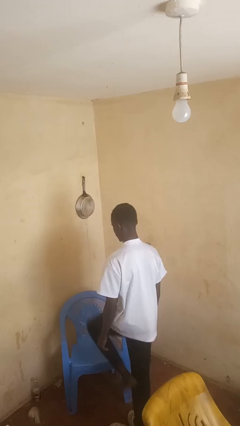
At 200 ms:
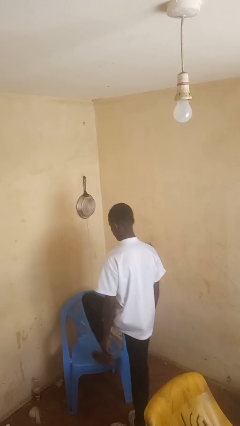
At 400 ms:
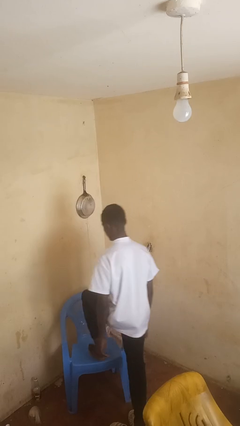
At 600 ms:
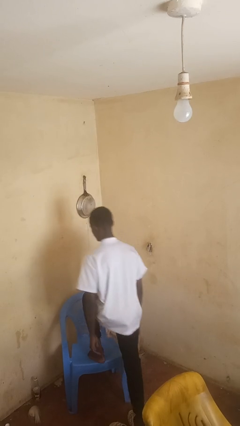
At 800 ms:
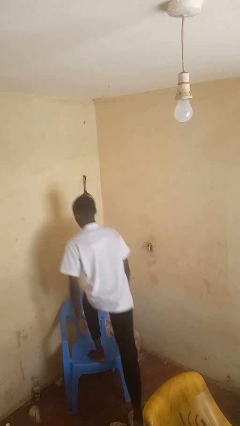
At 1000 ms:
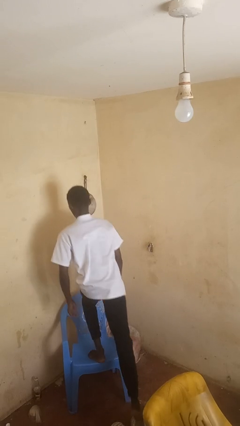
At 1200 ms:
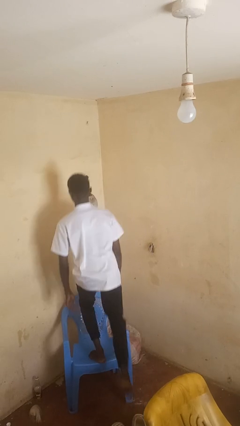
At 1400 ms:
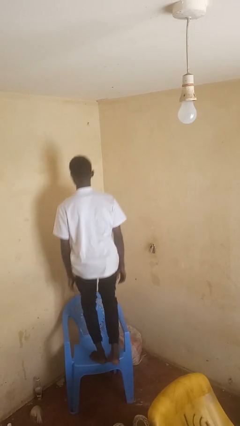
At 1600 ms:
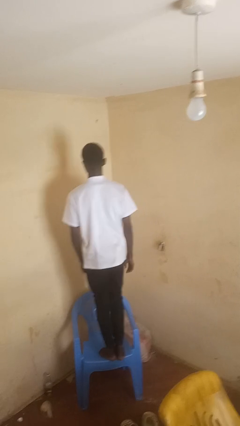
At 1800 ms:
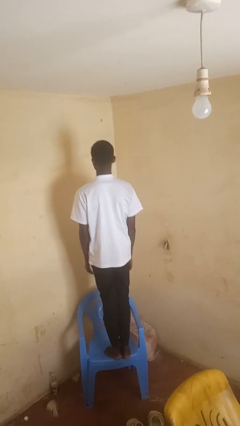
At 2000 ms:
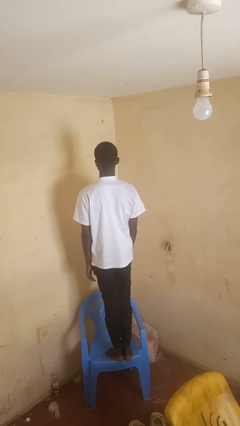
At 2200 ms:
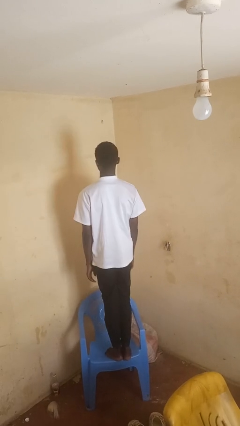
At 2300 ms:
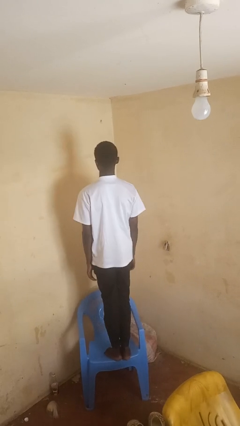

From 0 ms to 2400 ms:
person climbs on chair

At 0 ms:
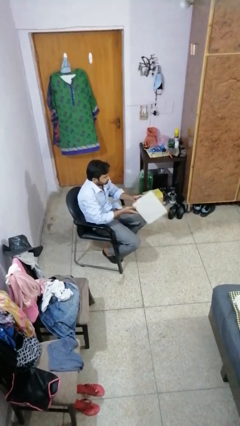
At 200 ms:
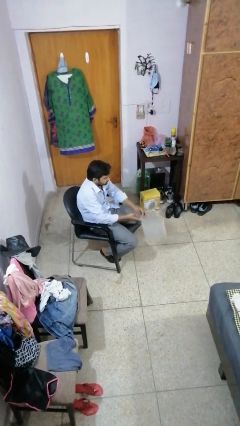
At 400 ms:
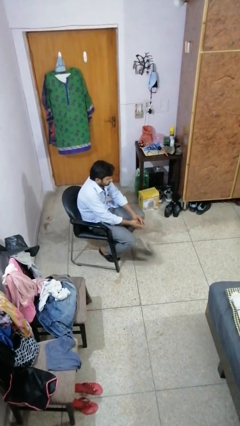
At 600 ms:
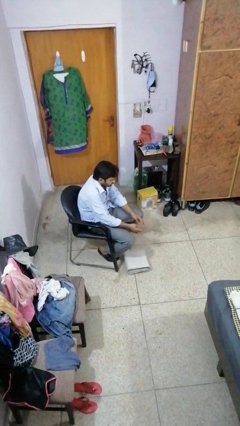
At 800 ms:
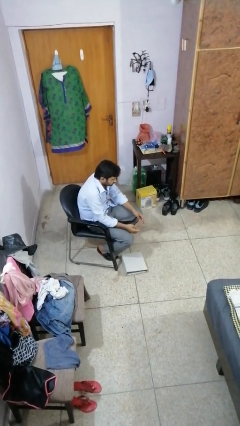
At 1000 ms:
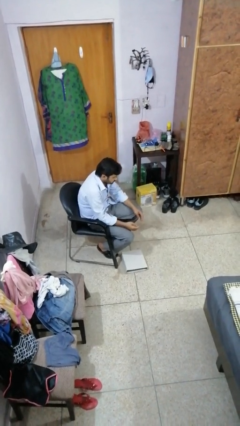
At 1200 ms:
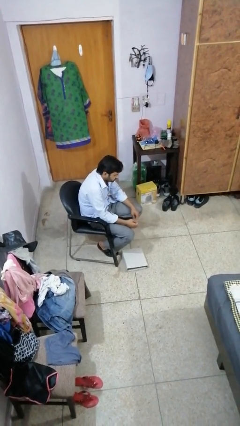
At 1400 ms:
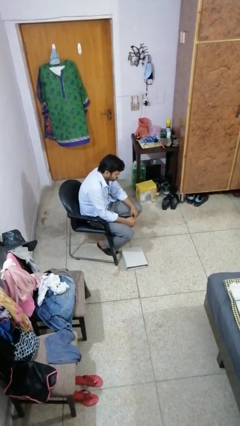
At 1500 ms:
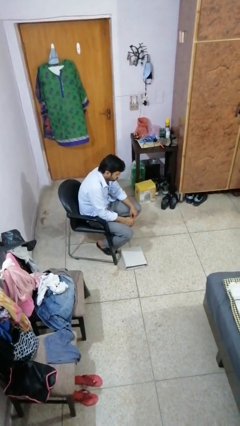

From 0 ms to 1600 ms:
person drops object

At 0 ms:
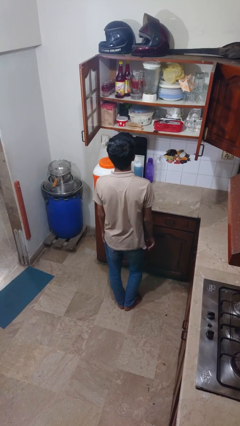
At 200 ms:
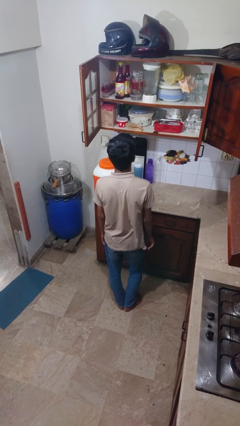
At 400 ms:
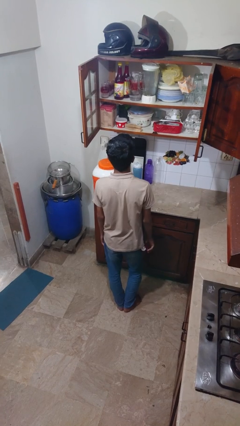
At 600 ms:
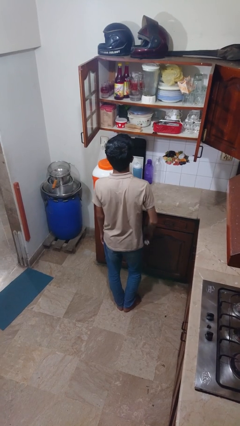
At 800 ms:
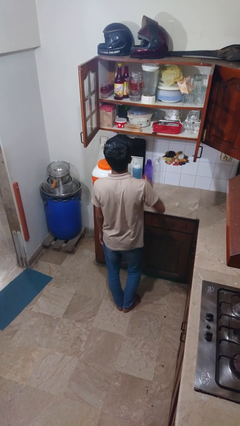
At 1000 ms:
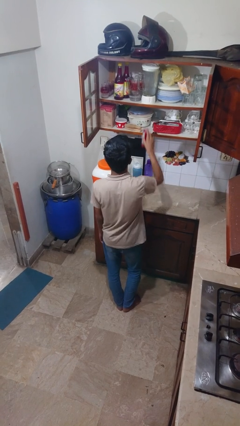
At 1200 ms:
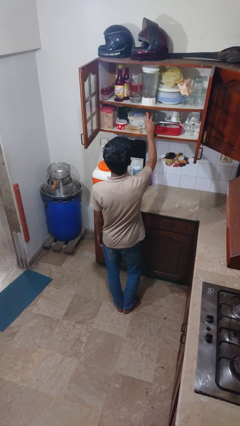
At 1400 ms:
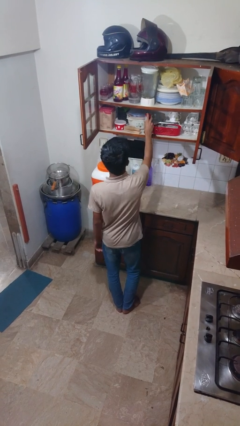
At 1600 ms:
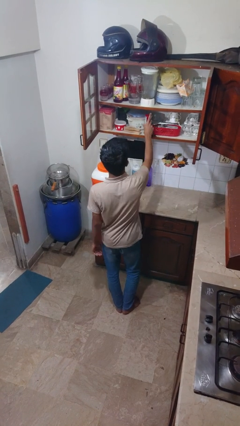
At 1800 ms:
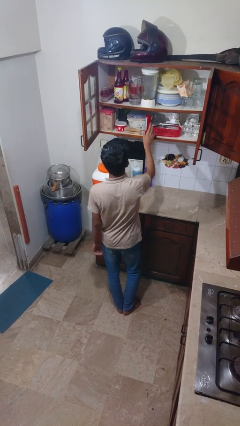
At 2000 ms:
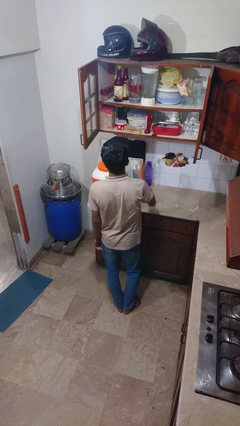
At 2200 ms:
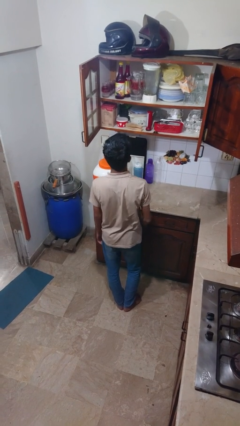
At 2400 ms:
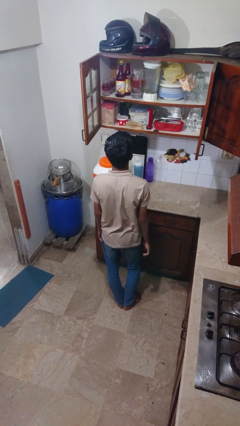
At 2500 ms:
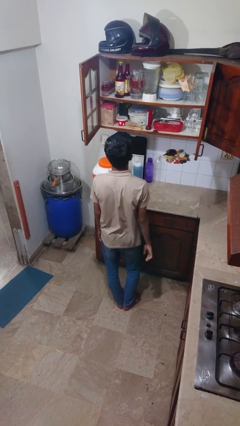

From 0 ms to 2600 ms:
person puts down object into cabinet

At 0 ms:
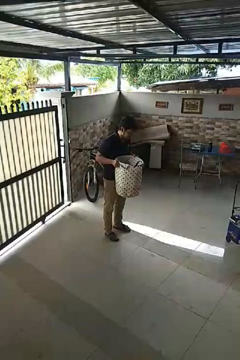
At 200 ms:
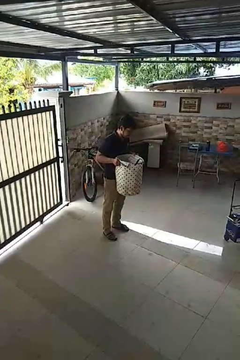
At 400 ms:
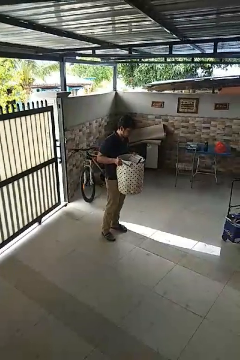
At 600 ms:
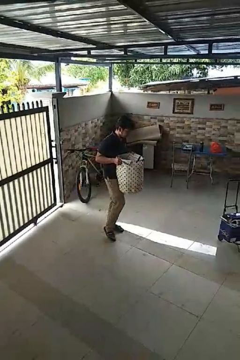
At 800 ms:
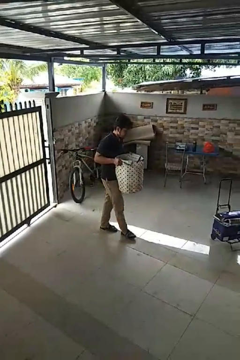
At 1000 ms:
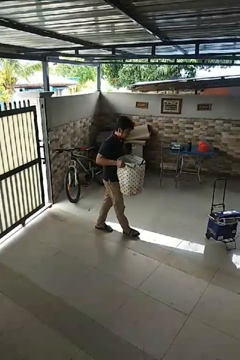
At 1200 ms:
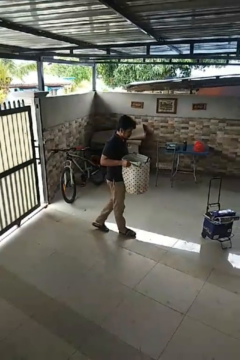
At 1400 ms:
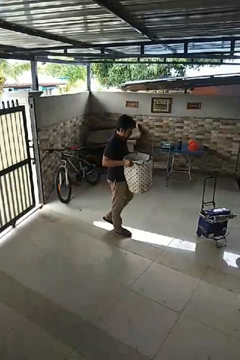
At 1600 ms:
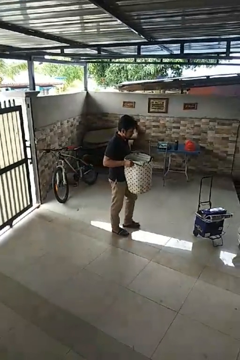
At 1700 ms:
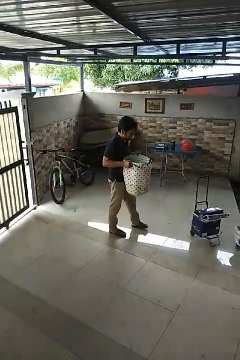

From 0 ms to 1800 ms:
person carries laundry basket

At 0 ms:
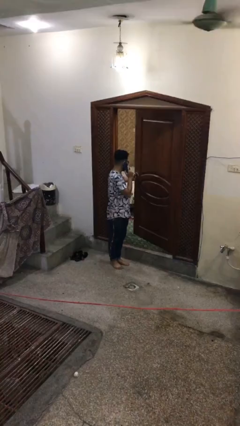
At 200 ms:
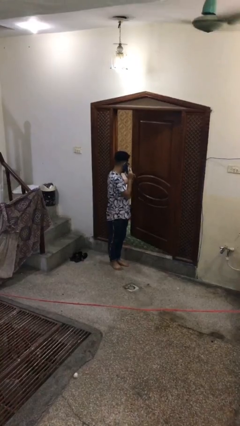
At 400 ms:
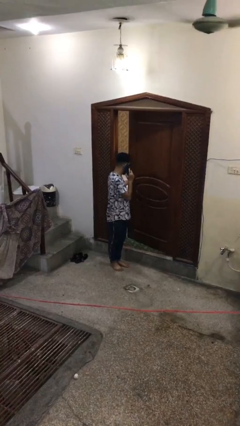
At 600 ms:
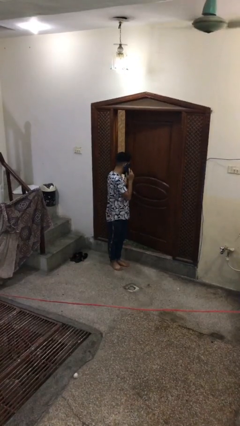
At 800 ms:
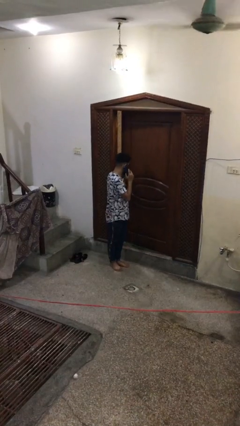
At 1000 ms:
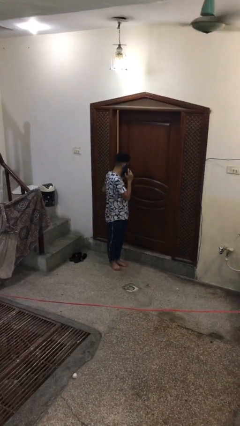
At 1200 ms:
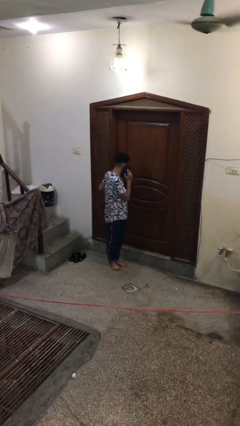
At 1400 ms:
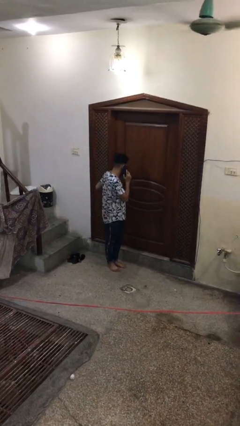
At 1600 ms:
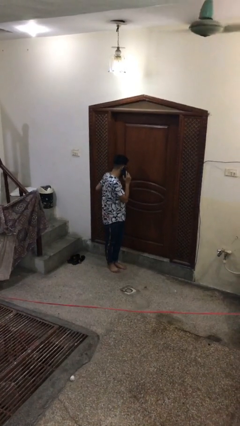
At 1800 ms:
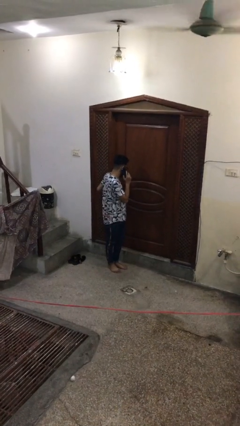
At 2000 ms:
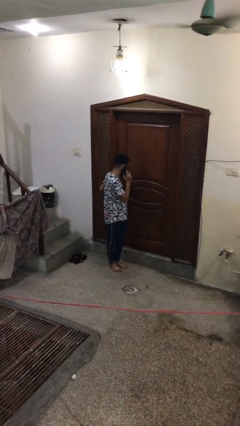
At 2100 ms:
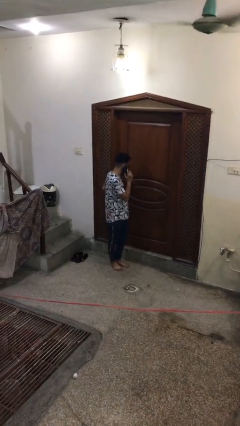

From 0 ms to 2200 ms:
person closes facility door

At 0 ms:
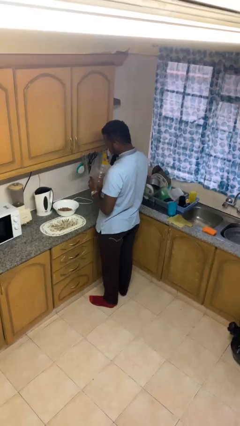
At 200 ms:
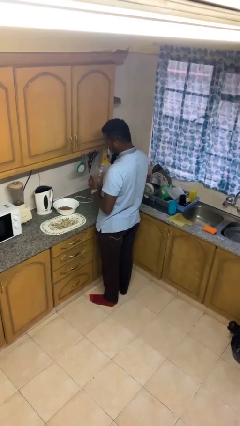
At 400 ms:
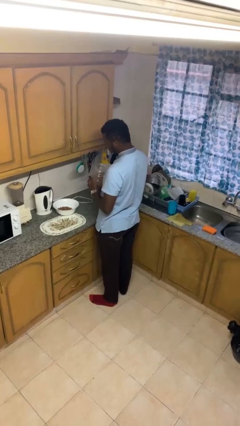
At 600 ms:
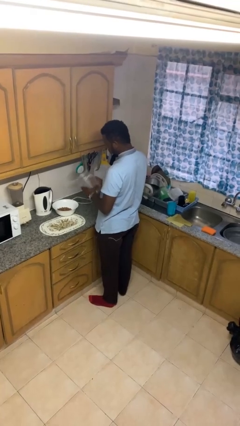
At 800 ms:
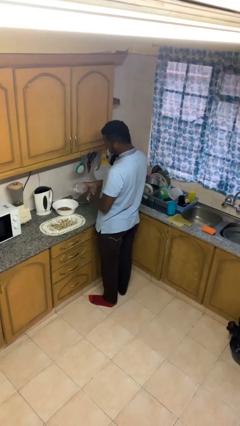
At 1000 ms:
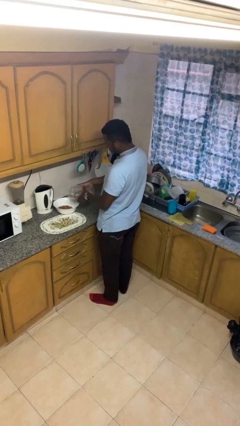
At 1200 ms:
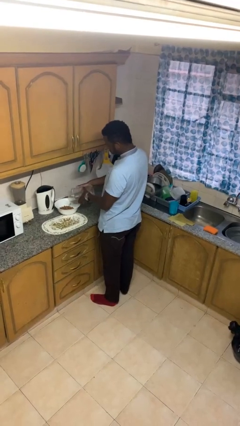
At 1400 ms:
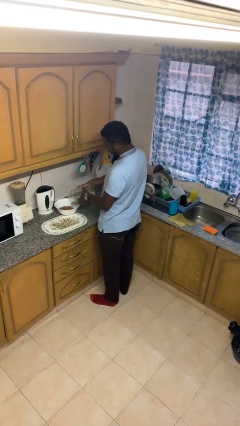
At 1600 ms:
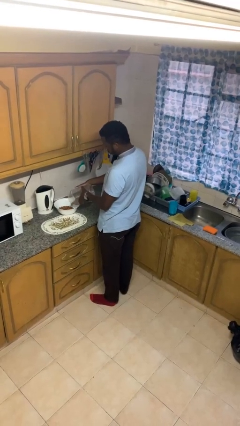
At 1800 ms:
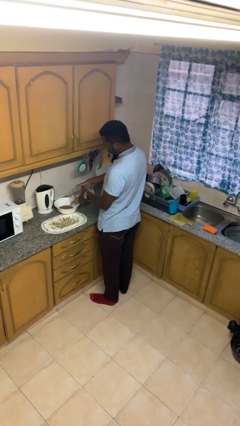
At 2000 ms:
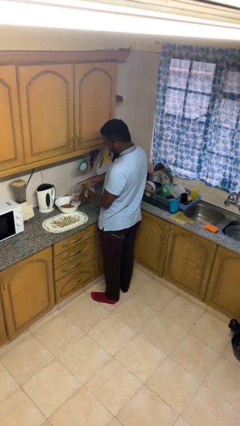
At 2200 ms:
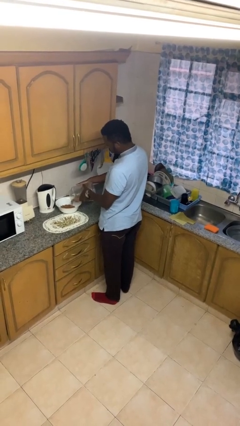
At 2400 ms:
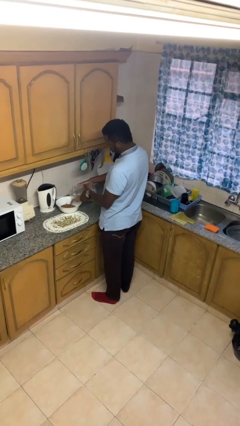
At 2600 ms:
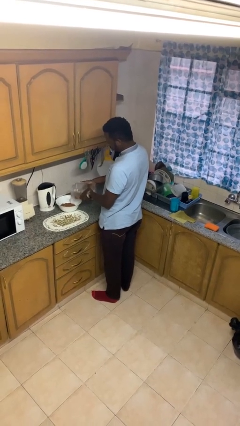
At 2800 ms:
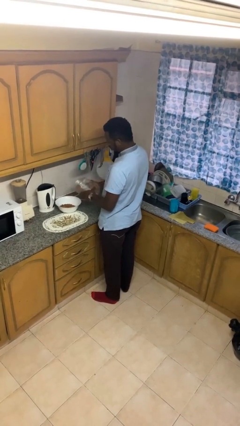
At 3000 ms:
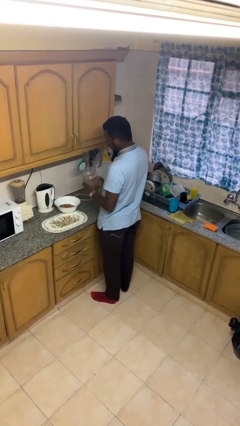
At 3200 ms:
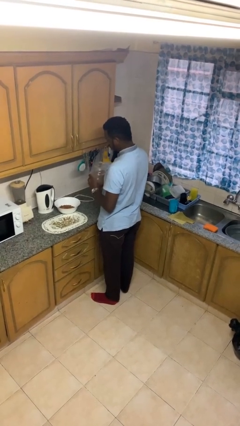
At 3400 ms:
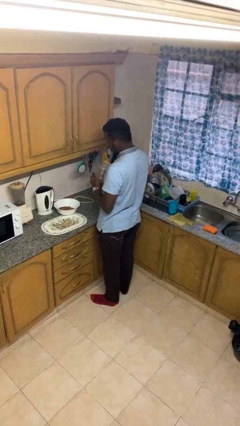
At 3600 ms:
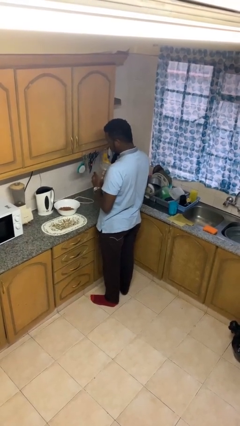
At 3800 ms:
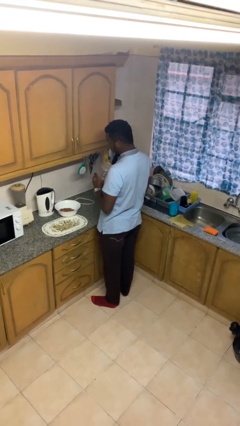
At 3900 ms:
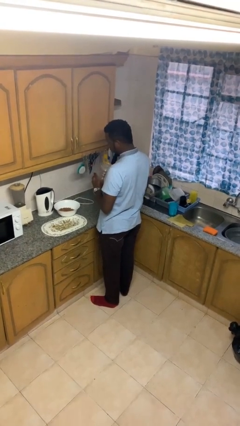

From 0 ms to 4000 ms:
person pours into bowl

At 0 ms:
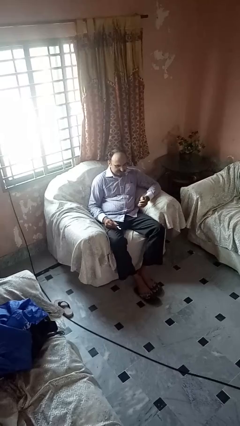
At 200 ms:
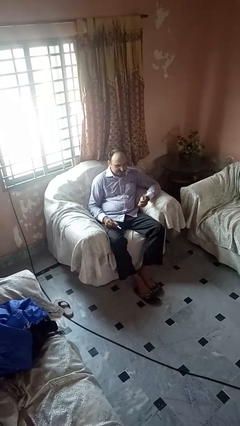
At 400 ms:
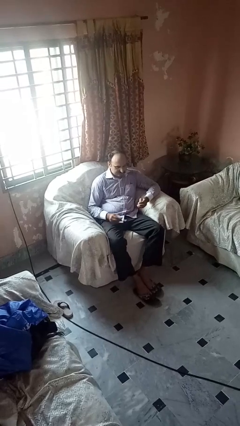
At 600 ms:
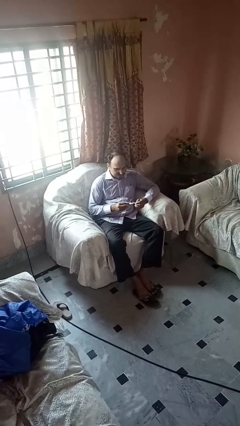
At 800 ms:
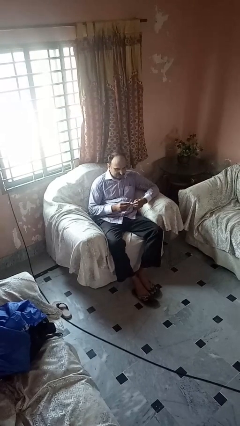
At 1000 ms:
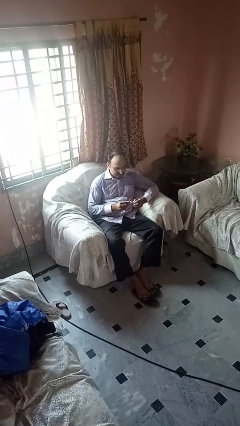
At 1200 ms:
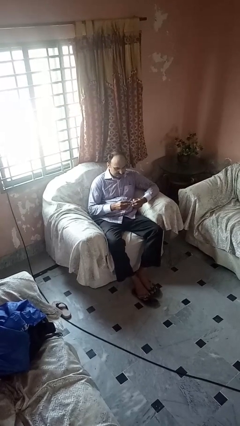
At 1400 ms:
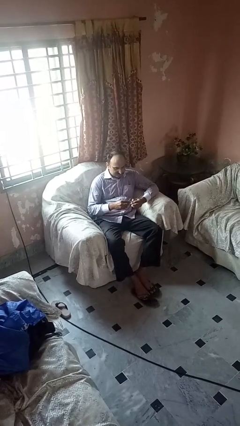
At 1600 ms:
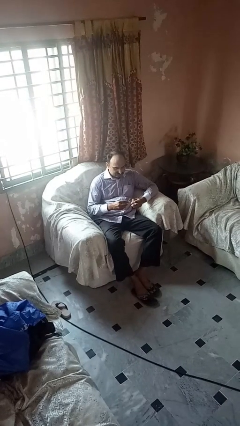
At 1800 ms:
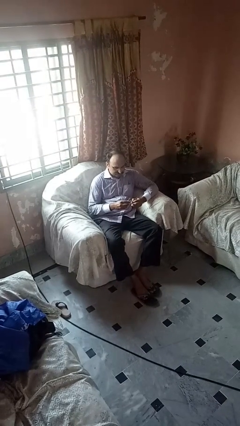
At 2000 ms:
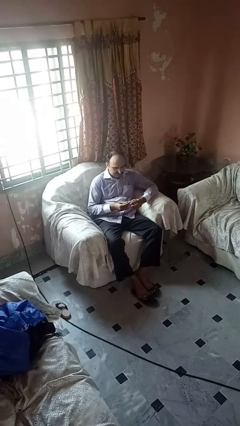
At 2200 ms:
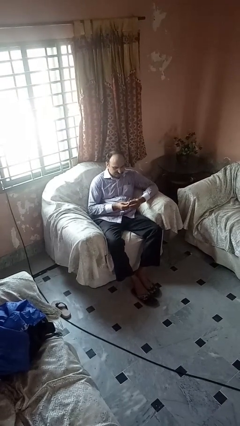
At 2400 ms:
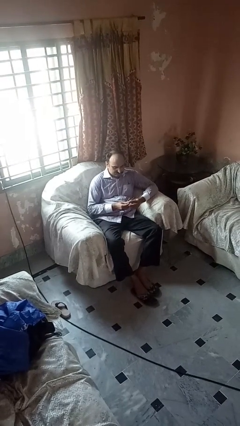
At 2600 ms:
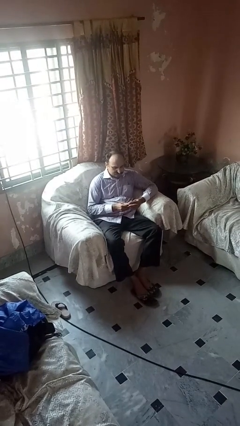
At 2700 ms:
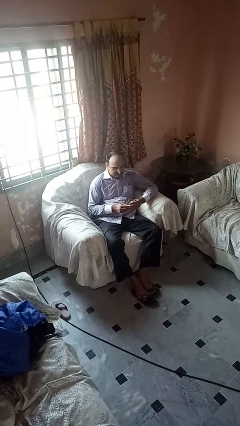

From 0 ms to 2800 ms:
person files fingernails

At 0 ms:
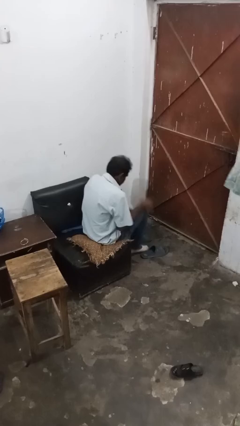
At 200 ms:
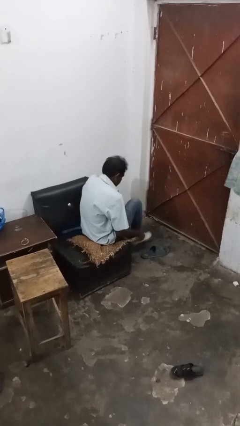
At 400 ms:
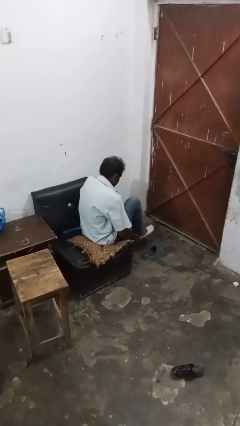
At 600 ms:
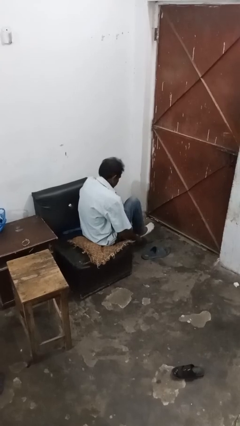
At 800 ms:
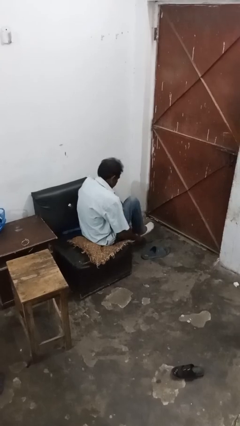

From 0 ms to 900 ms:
person takes off socks
